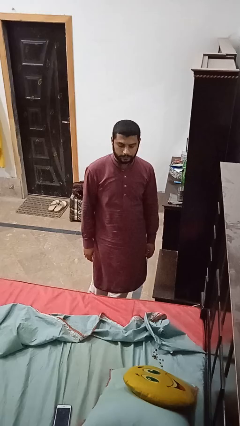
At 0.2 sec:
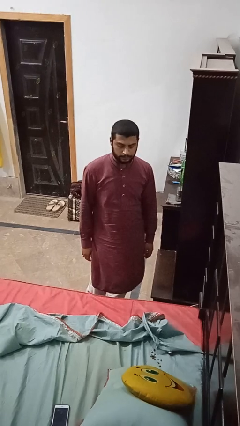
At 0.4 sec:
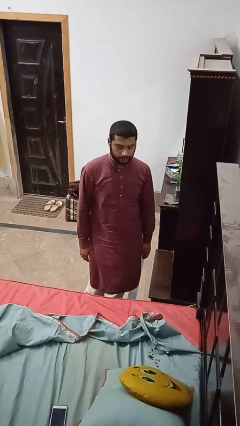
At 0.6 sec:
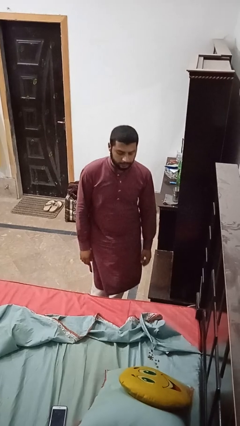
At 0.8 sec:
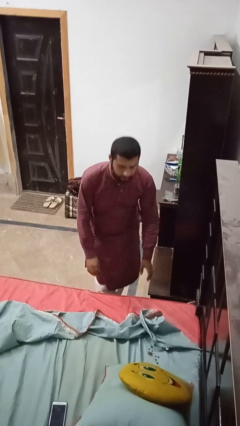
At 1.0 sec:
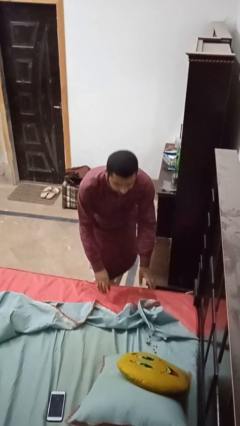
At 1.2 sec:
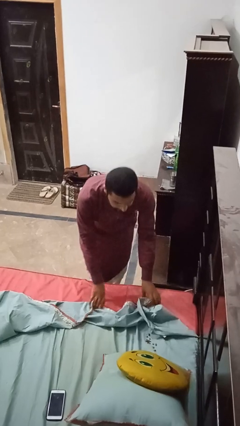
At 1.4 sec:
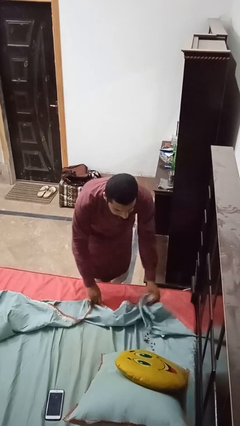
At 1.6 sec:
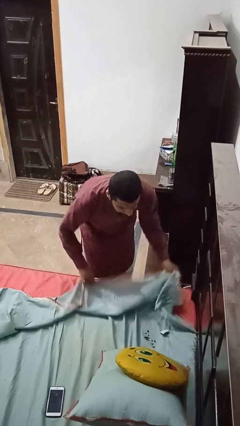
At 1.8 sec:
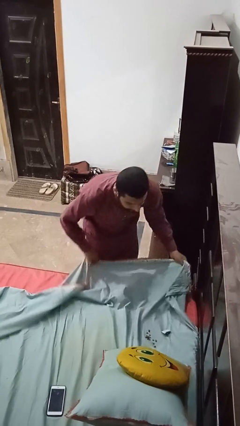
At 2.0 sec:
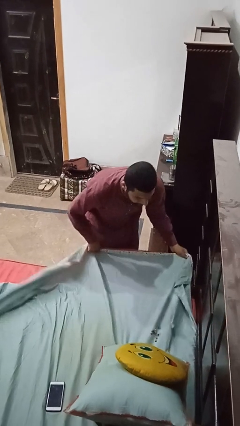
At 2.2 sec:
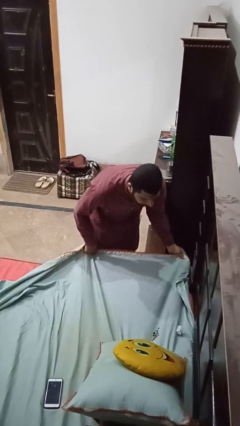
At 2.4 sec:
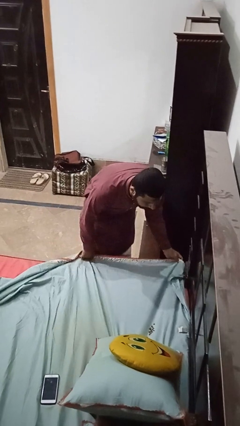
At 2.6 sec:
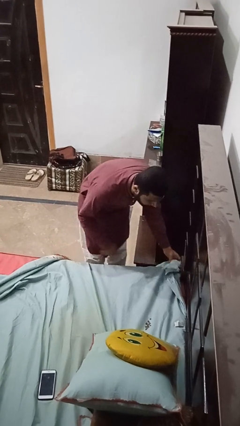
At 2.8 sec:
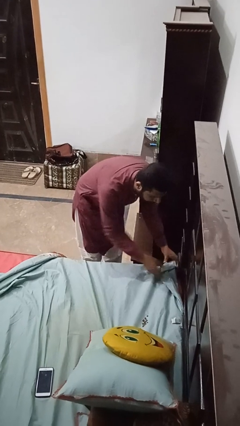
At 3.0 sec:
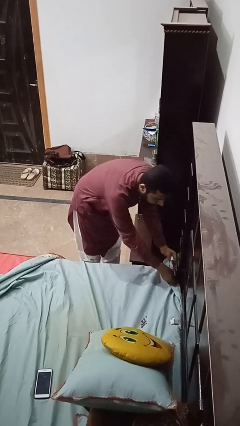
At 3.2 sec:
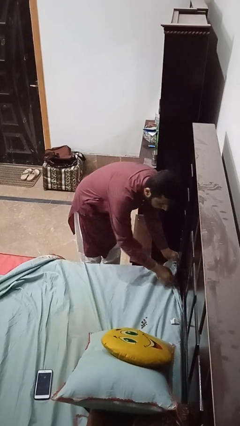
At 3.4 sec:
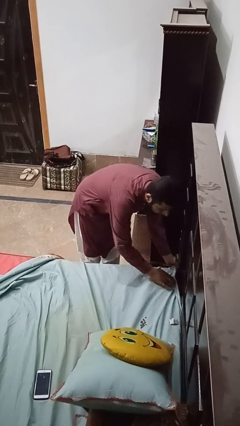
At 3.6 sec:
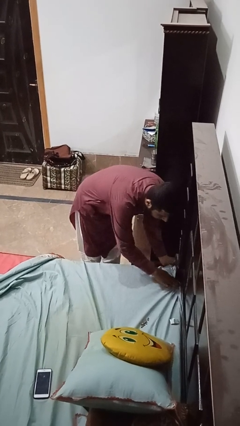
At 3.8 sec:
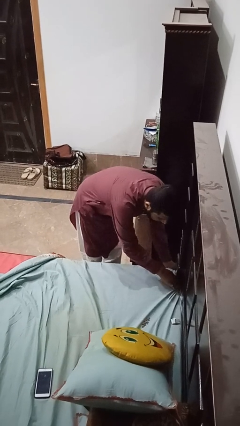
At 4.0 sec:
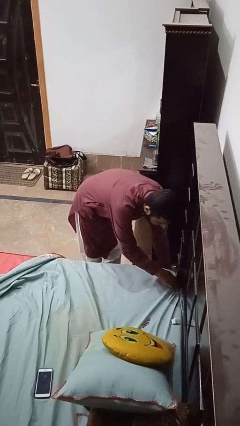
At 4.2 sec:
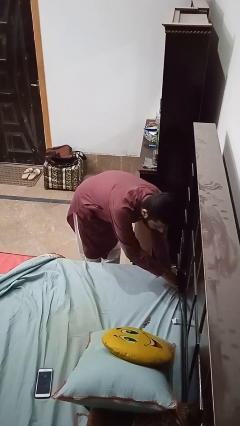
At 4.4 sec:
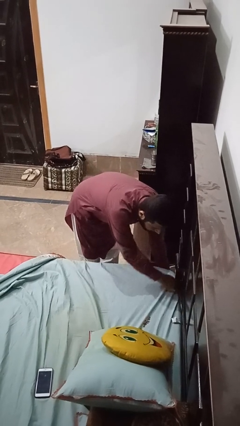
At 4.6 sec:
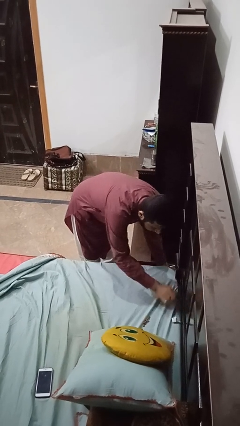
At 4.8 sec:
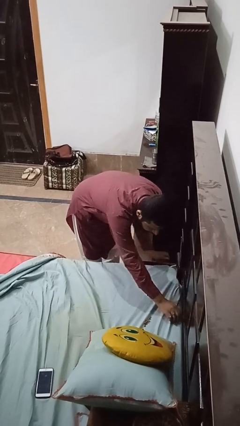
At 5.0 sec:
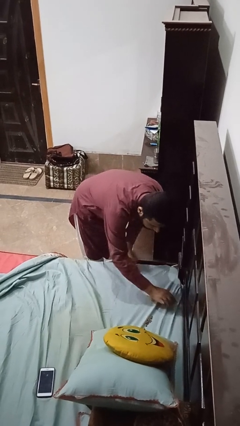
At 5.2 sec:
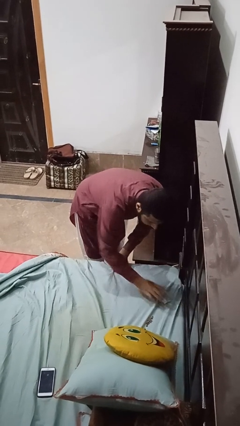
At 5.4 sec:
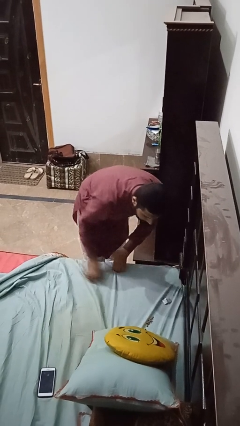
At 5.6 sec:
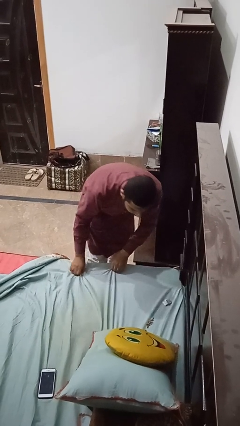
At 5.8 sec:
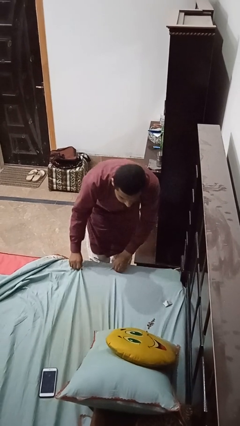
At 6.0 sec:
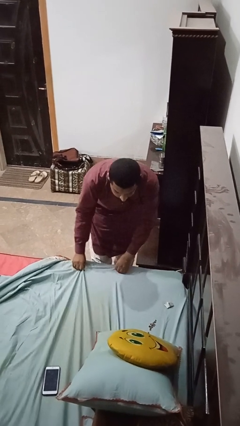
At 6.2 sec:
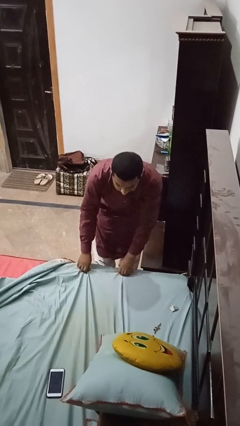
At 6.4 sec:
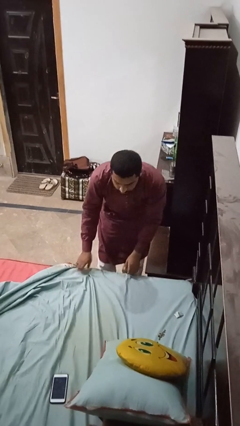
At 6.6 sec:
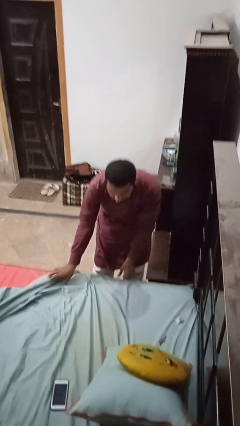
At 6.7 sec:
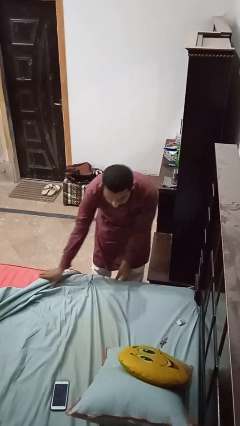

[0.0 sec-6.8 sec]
person makes bed

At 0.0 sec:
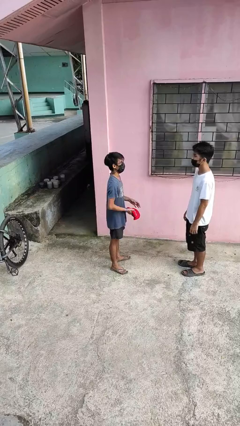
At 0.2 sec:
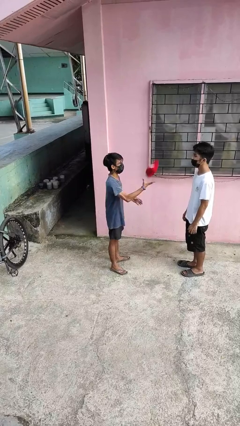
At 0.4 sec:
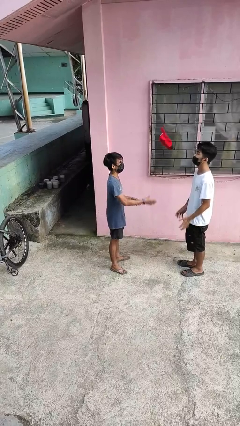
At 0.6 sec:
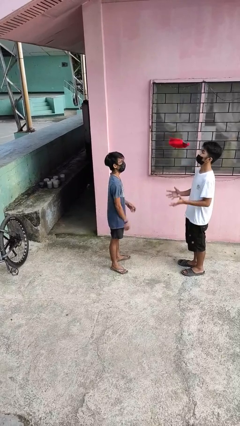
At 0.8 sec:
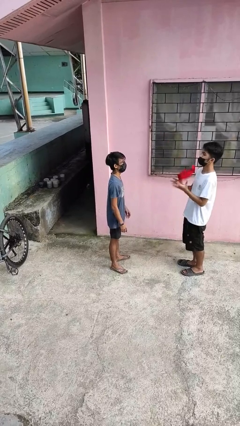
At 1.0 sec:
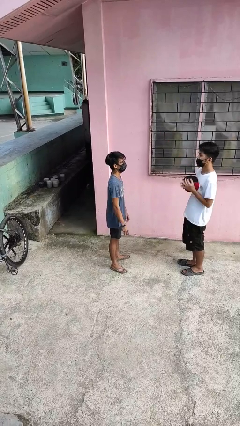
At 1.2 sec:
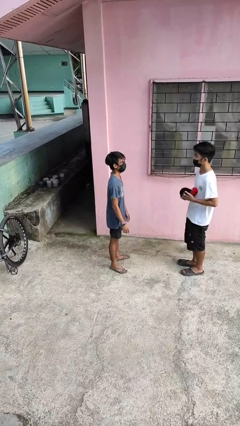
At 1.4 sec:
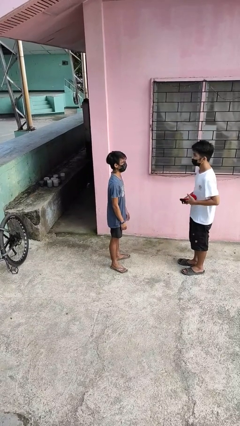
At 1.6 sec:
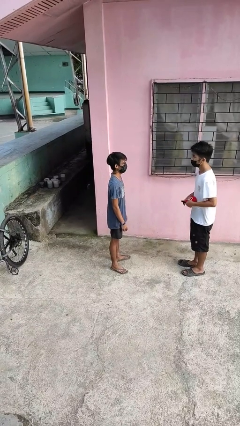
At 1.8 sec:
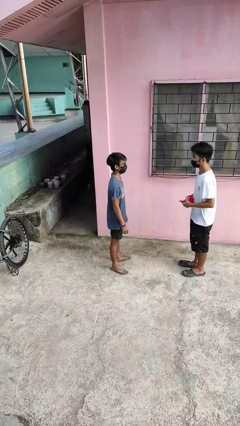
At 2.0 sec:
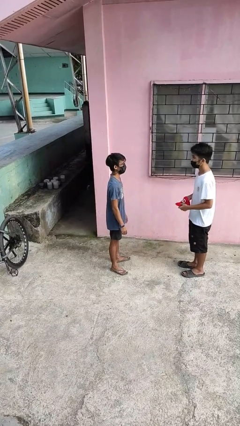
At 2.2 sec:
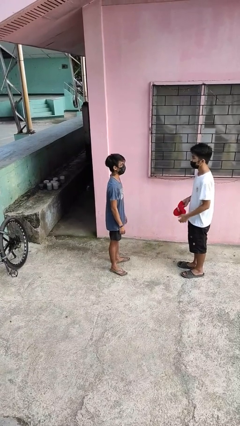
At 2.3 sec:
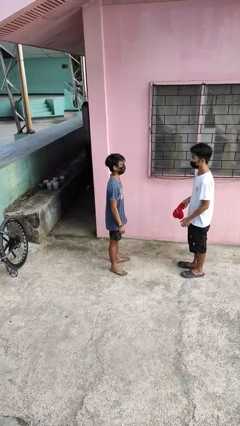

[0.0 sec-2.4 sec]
person throws object to person

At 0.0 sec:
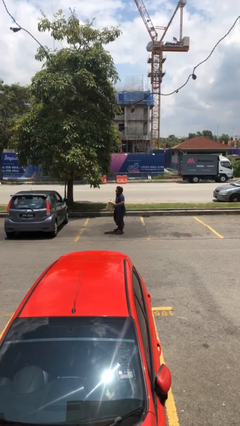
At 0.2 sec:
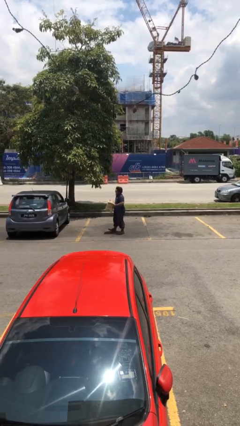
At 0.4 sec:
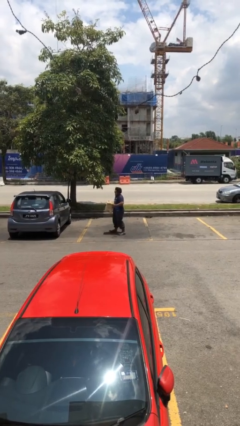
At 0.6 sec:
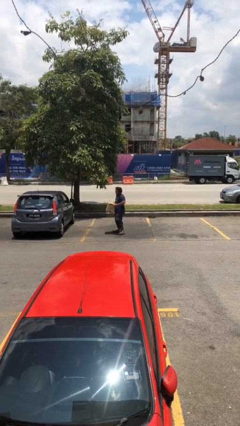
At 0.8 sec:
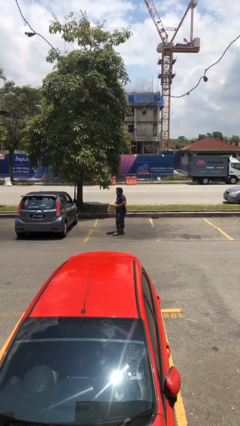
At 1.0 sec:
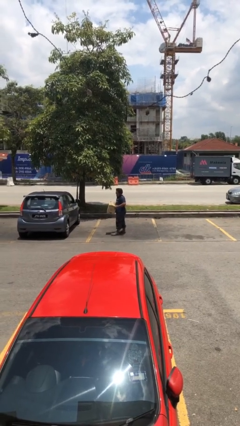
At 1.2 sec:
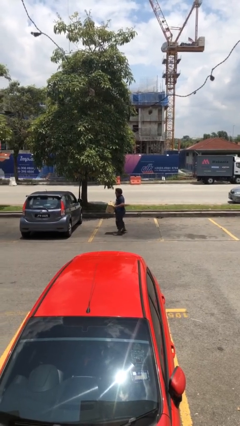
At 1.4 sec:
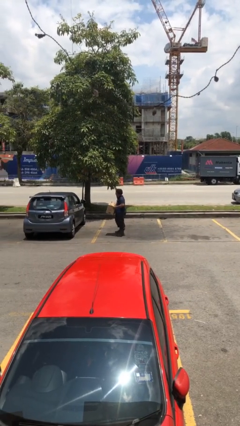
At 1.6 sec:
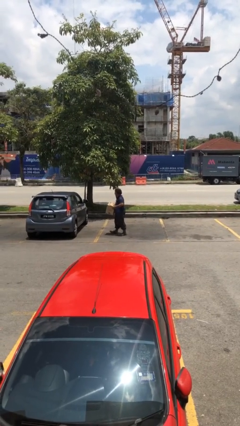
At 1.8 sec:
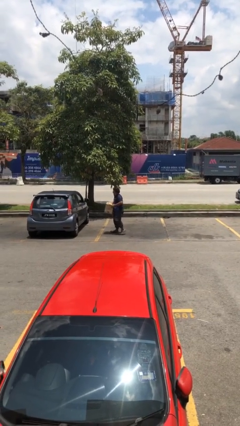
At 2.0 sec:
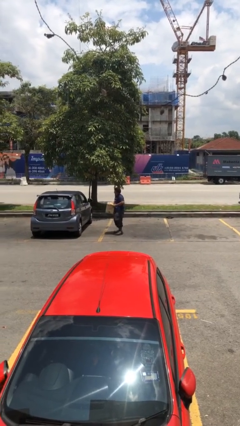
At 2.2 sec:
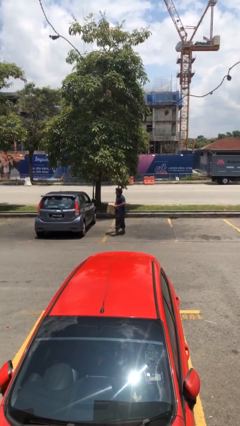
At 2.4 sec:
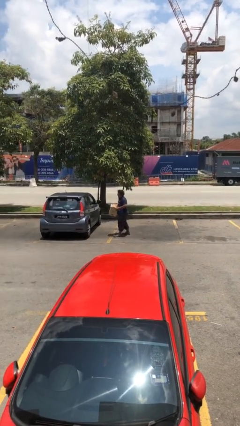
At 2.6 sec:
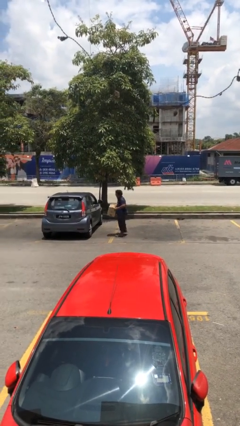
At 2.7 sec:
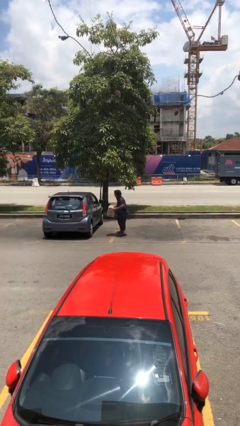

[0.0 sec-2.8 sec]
person carries heavy object

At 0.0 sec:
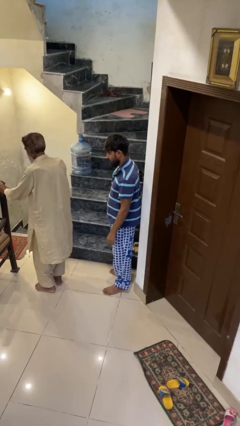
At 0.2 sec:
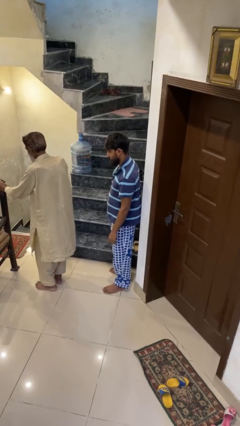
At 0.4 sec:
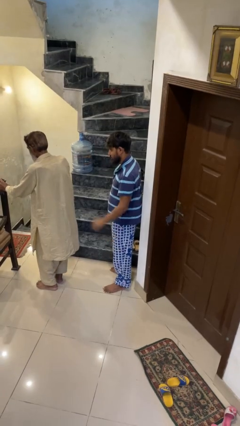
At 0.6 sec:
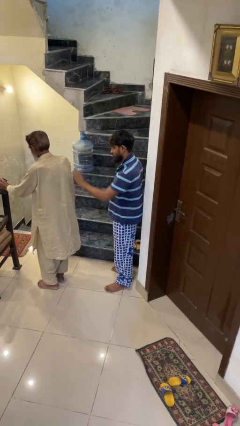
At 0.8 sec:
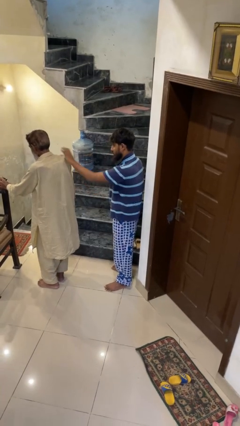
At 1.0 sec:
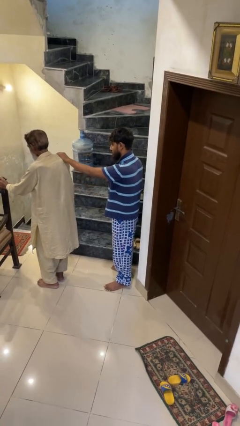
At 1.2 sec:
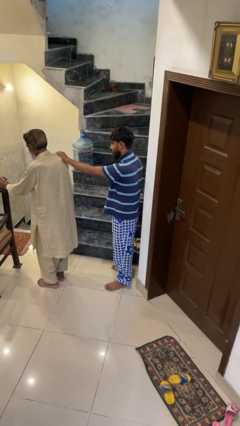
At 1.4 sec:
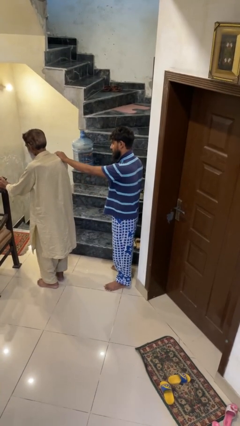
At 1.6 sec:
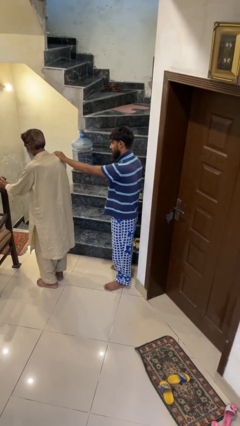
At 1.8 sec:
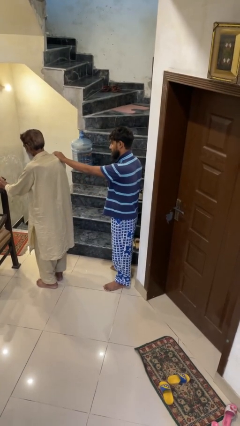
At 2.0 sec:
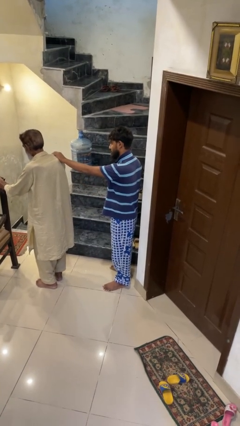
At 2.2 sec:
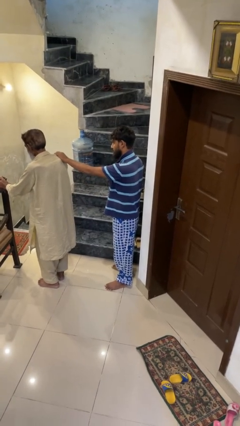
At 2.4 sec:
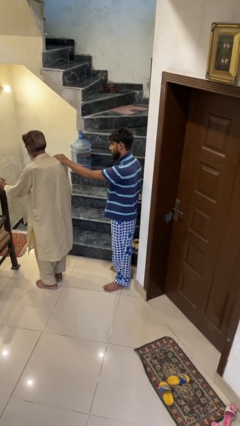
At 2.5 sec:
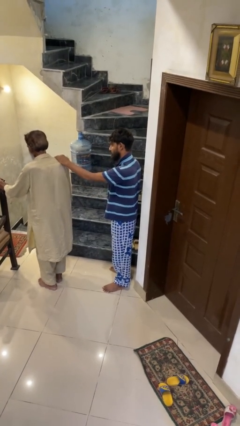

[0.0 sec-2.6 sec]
person grabs person by shoulder

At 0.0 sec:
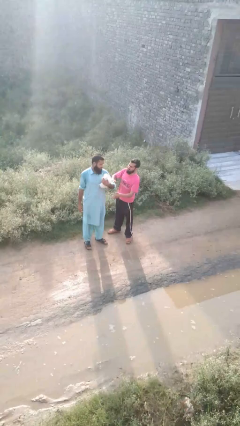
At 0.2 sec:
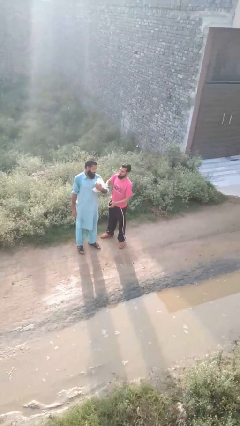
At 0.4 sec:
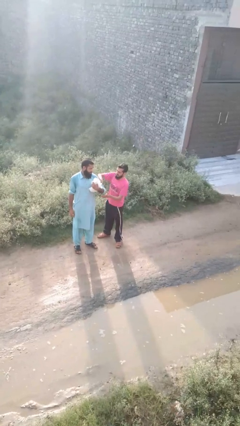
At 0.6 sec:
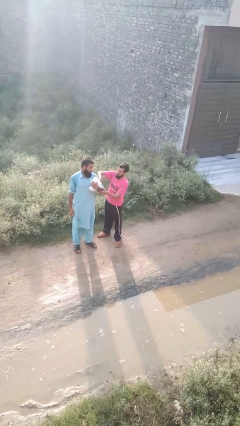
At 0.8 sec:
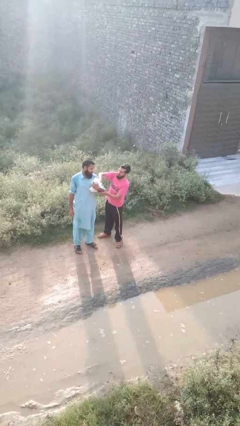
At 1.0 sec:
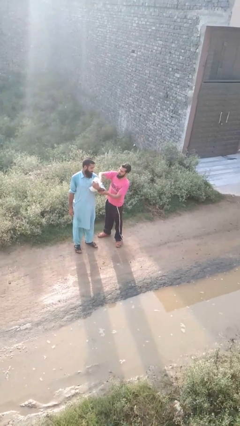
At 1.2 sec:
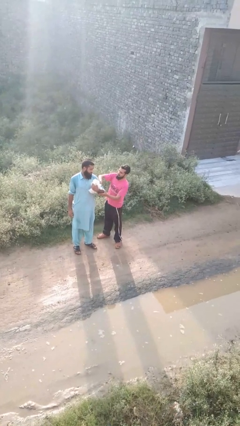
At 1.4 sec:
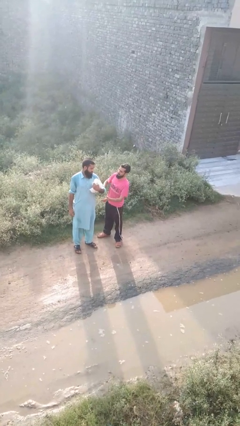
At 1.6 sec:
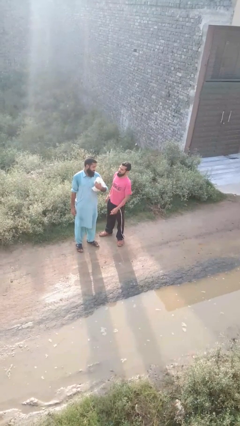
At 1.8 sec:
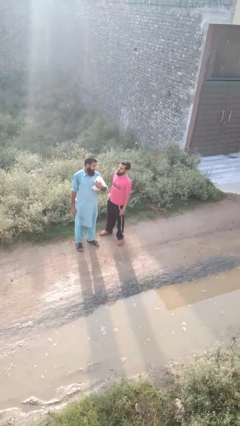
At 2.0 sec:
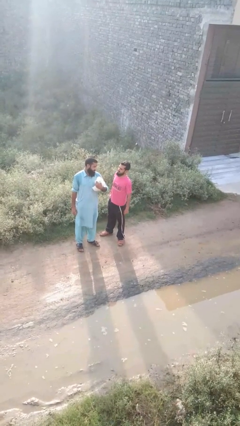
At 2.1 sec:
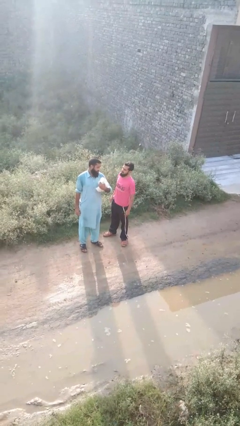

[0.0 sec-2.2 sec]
person grabs person by bicep

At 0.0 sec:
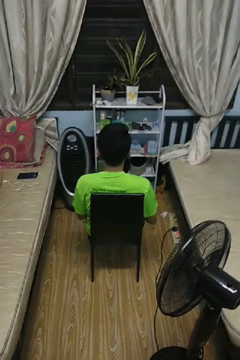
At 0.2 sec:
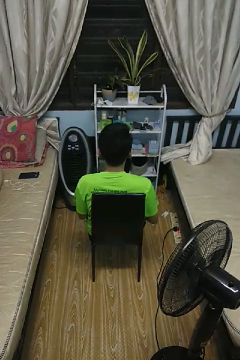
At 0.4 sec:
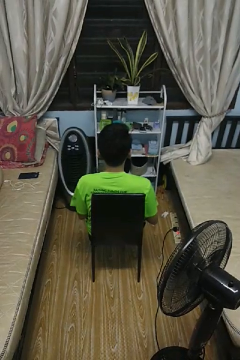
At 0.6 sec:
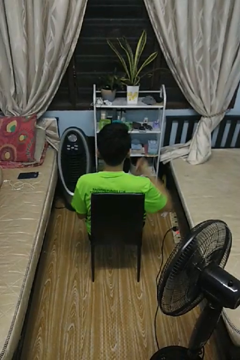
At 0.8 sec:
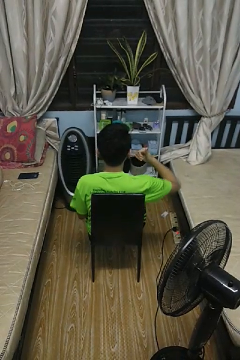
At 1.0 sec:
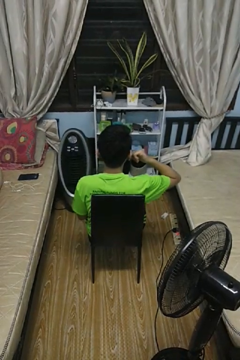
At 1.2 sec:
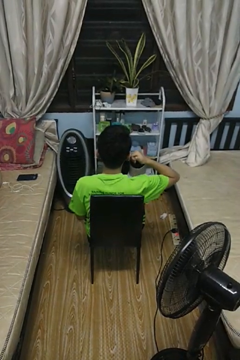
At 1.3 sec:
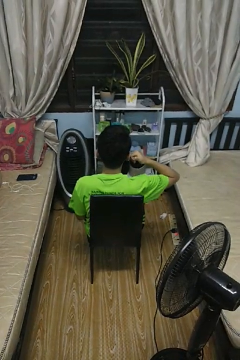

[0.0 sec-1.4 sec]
person gestures call me
